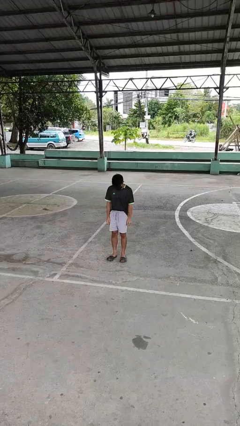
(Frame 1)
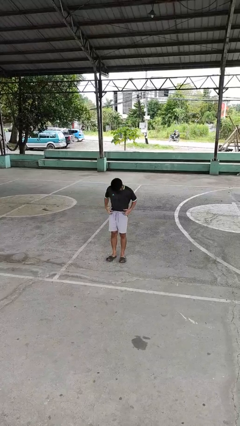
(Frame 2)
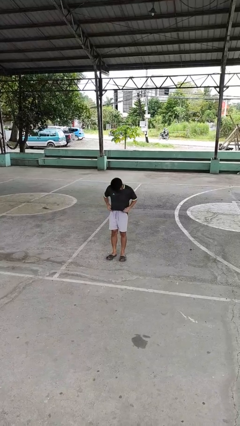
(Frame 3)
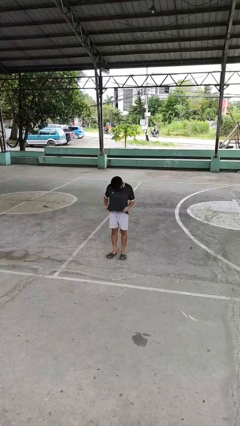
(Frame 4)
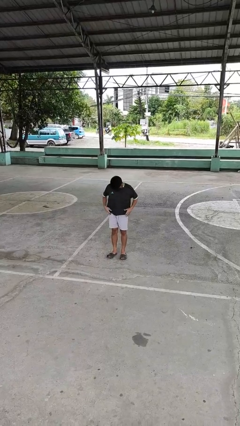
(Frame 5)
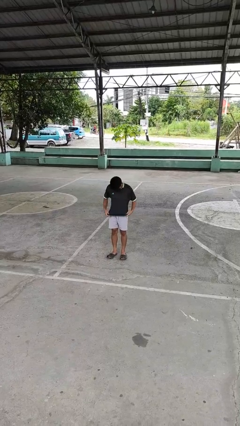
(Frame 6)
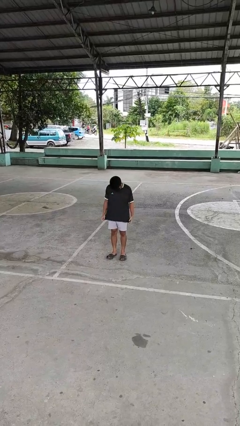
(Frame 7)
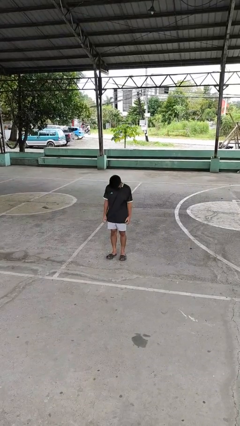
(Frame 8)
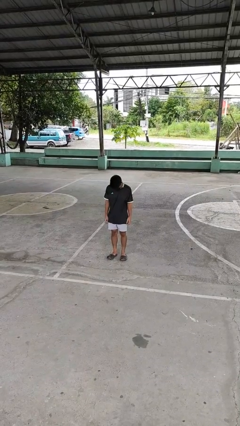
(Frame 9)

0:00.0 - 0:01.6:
person untucks shirt

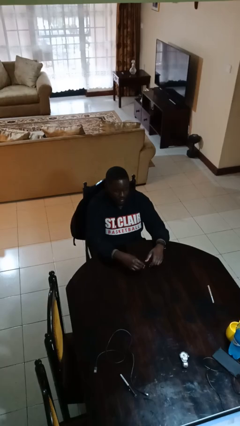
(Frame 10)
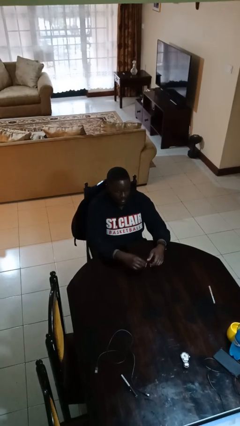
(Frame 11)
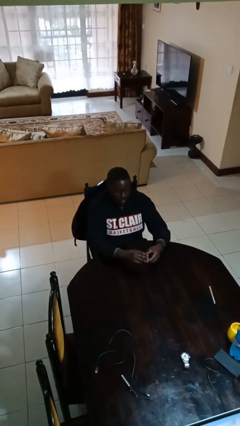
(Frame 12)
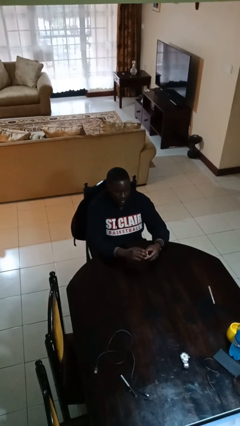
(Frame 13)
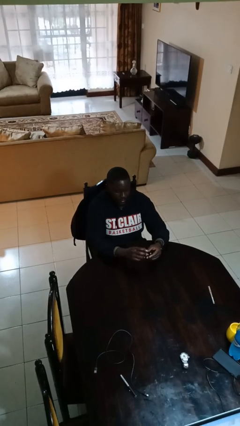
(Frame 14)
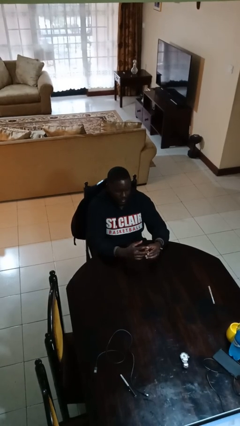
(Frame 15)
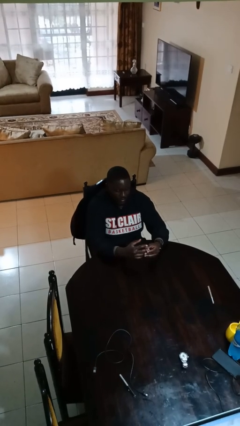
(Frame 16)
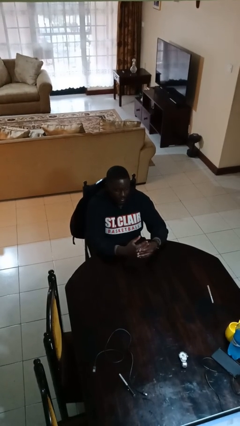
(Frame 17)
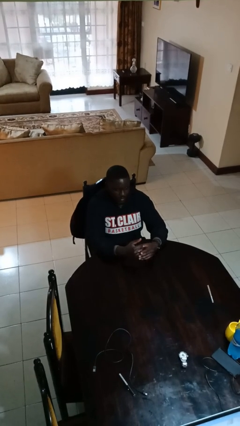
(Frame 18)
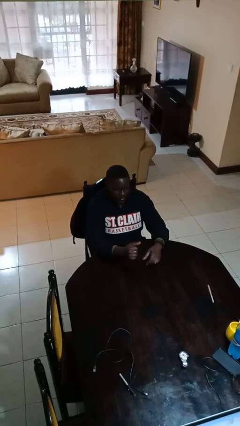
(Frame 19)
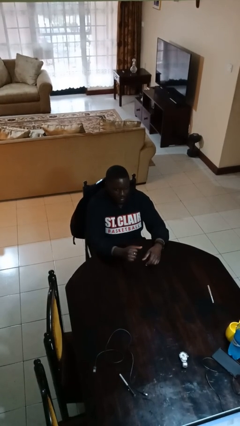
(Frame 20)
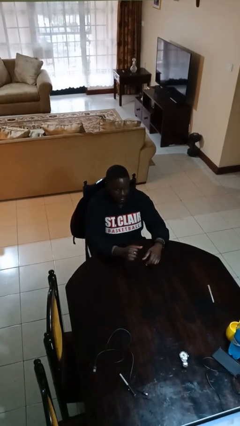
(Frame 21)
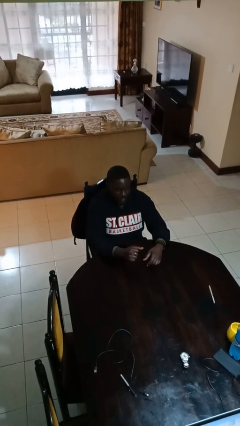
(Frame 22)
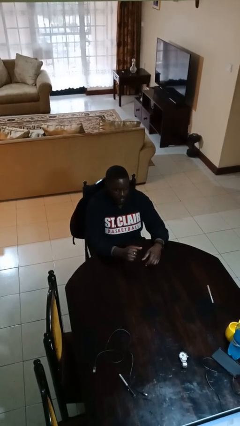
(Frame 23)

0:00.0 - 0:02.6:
person puts on ring

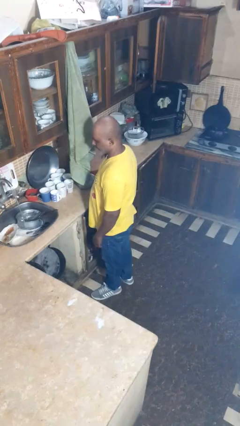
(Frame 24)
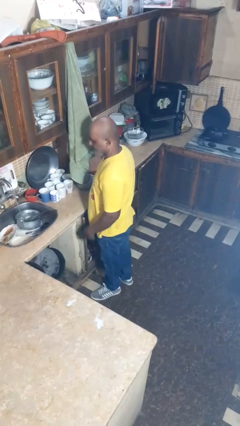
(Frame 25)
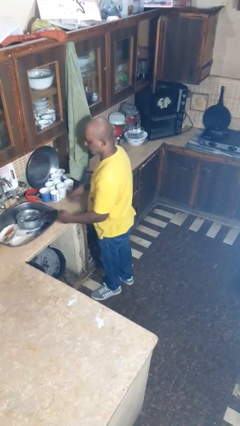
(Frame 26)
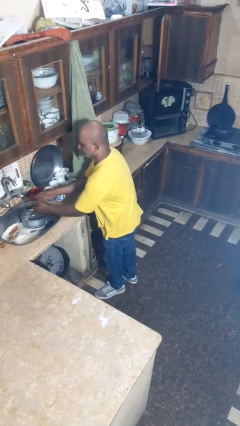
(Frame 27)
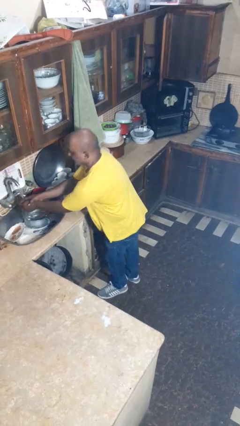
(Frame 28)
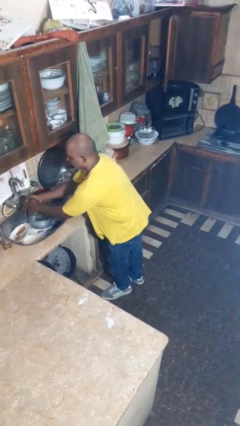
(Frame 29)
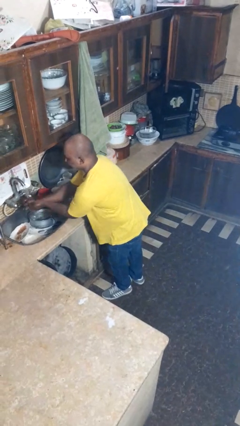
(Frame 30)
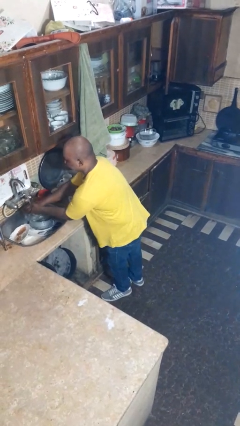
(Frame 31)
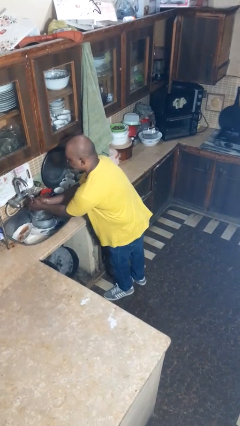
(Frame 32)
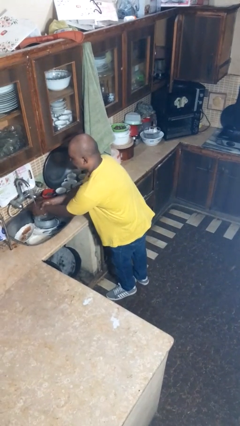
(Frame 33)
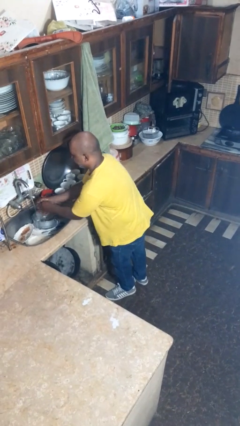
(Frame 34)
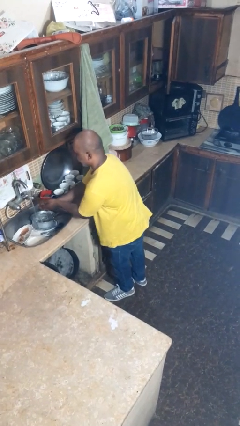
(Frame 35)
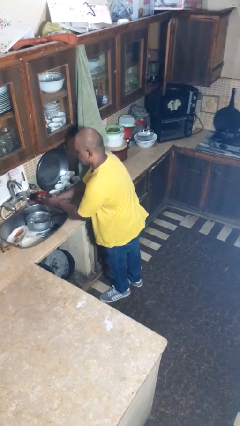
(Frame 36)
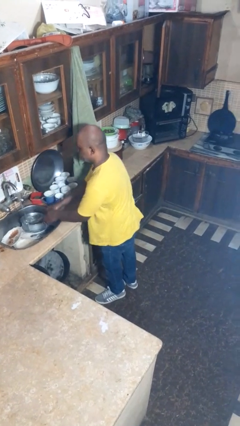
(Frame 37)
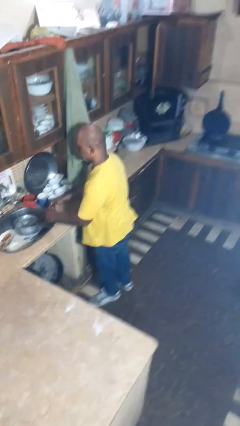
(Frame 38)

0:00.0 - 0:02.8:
person washes hands

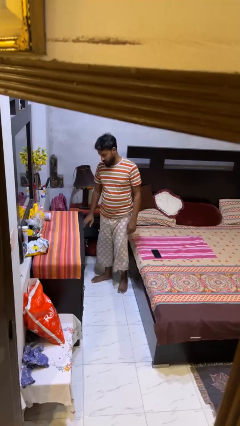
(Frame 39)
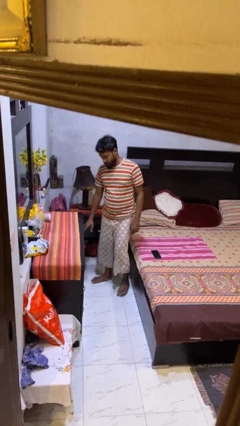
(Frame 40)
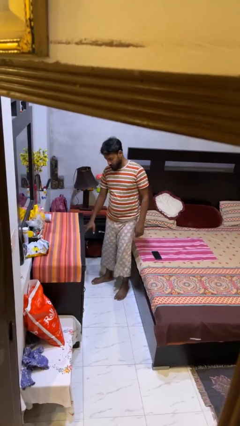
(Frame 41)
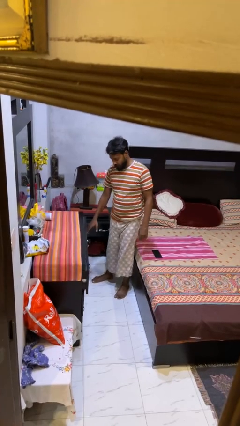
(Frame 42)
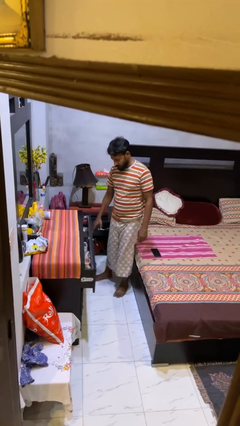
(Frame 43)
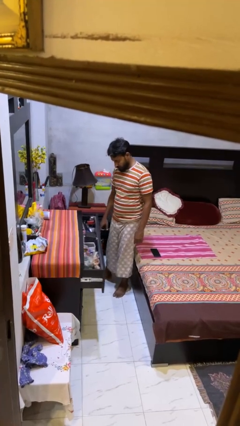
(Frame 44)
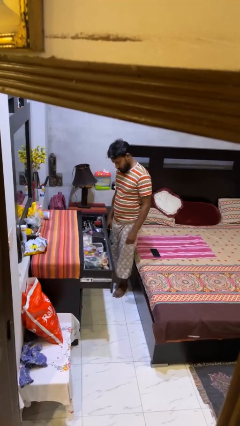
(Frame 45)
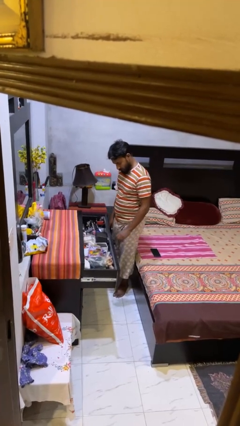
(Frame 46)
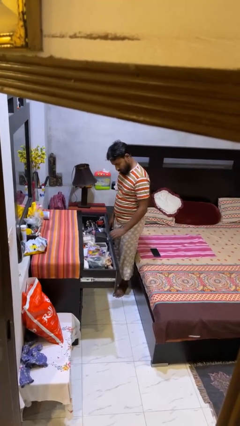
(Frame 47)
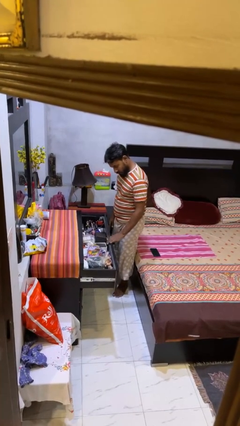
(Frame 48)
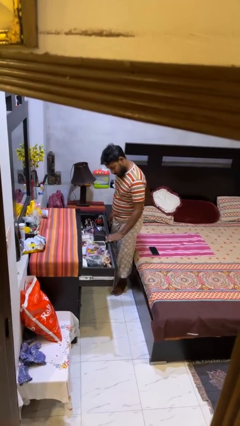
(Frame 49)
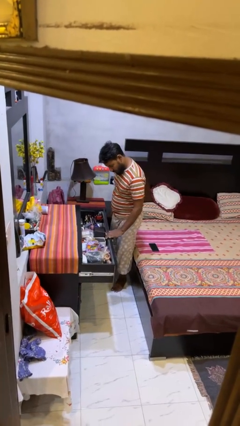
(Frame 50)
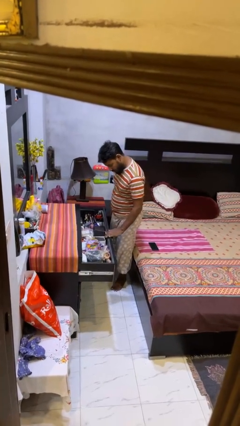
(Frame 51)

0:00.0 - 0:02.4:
person opens dresser drawer

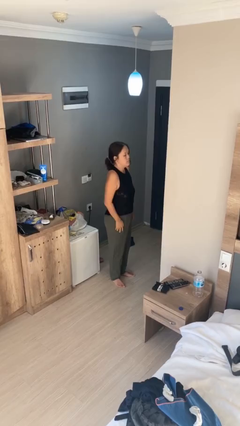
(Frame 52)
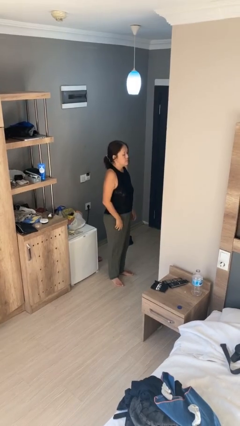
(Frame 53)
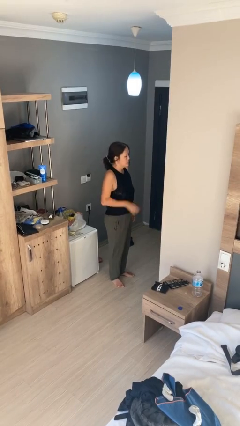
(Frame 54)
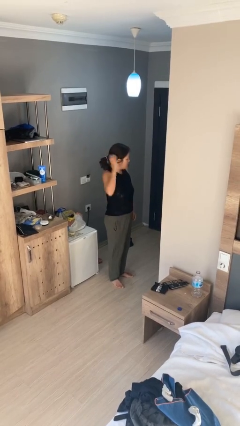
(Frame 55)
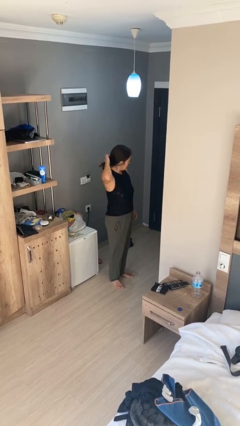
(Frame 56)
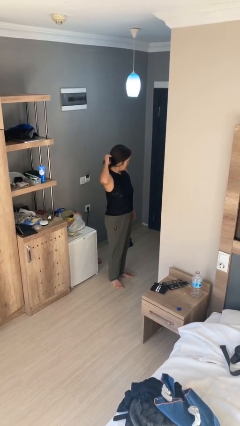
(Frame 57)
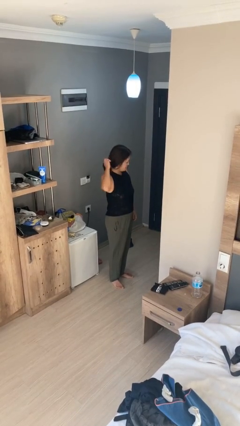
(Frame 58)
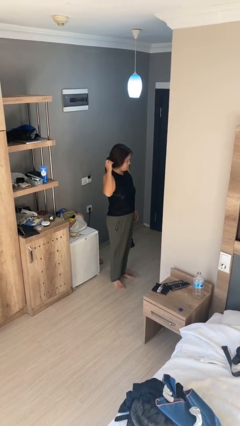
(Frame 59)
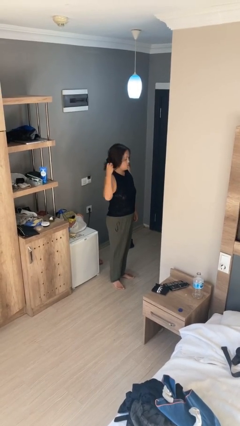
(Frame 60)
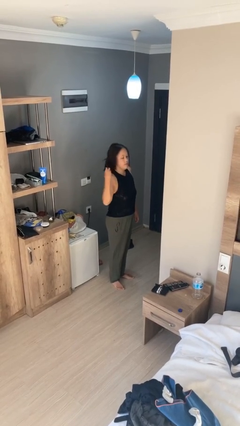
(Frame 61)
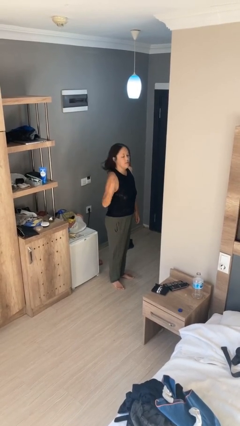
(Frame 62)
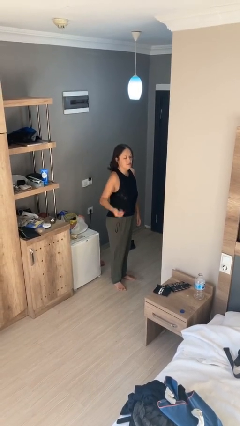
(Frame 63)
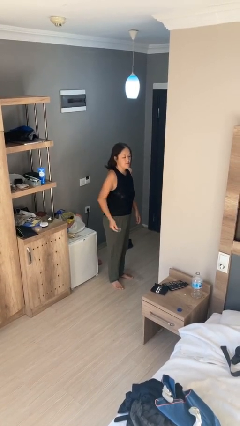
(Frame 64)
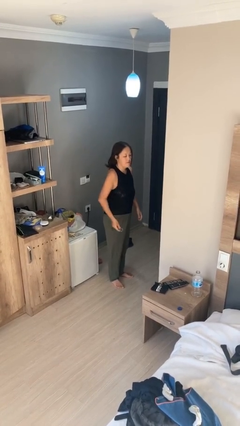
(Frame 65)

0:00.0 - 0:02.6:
person takes off hairtie

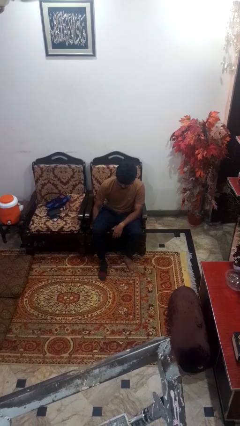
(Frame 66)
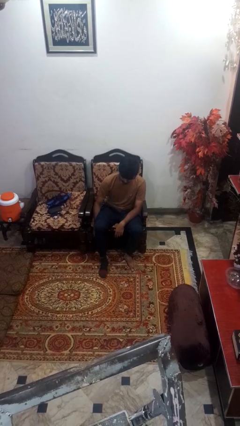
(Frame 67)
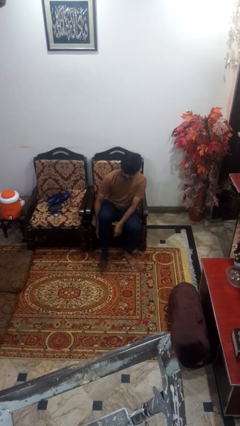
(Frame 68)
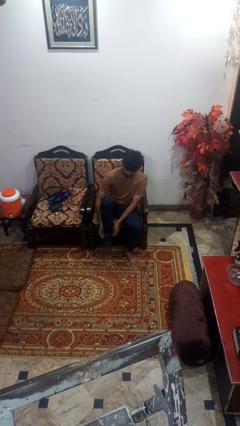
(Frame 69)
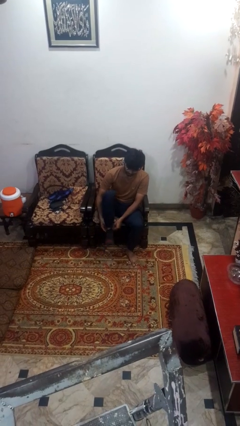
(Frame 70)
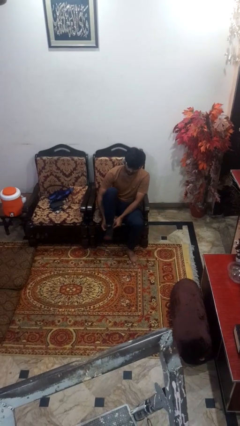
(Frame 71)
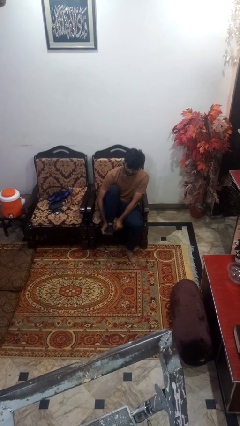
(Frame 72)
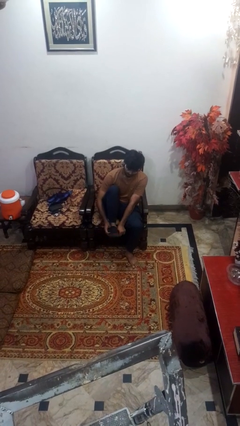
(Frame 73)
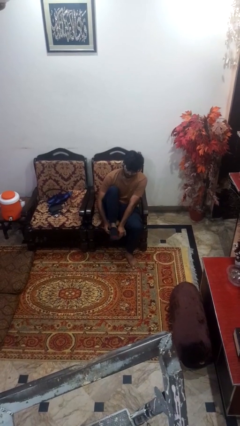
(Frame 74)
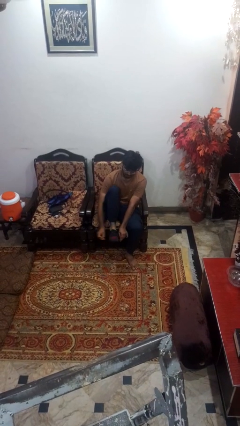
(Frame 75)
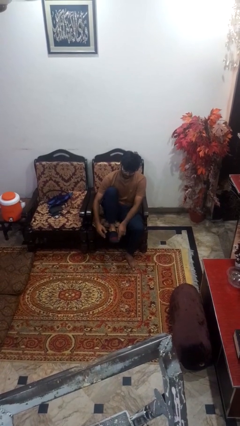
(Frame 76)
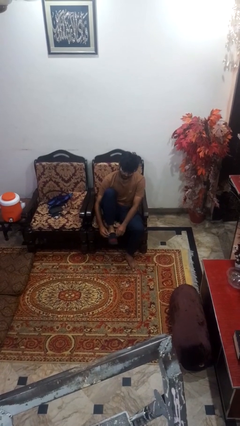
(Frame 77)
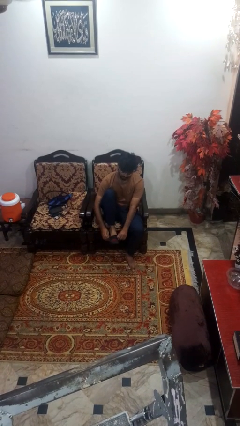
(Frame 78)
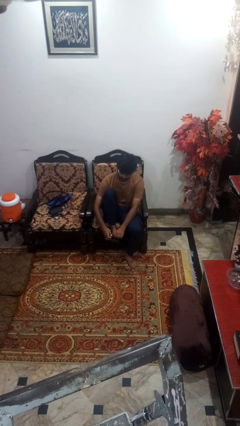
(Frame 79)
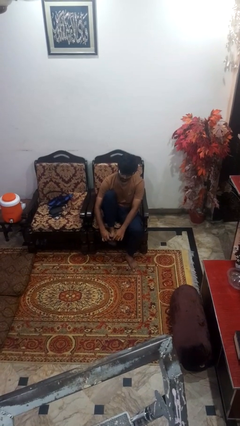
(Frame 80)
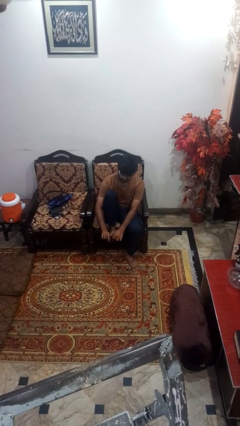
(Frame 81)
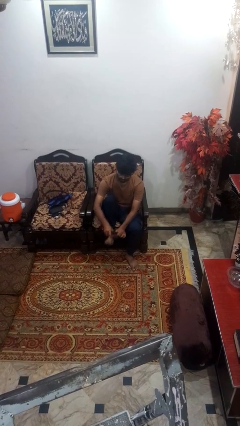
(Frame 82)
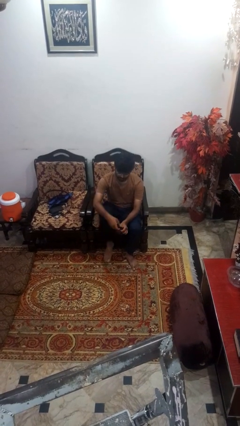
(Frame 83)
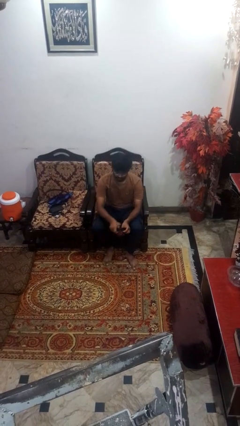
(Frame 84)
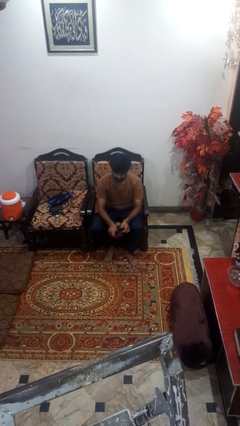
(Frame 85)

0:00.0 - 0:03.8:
person takes off socks

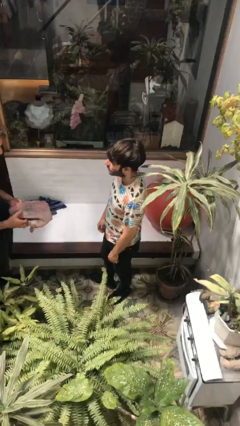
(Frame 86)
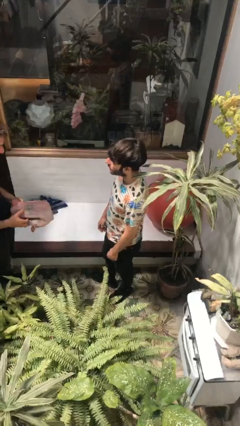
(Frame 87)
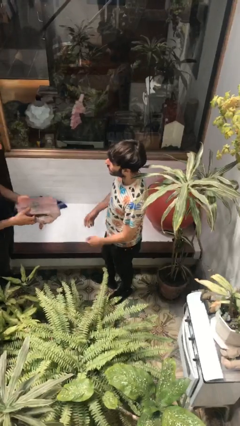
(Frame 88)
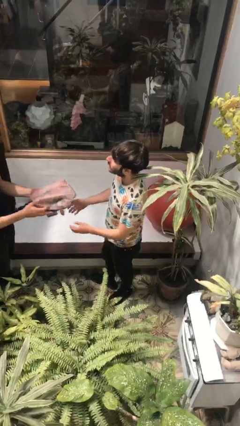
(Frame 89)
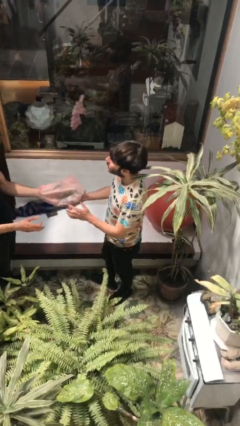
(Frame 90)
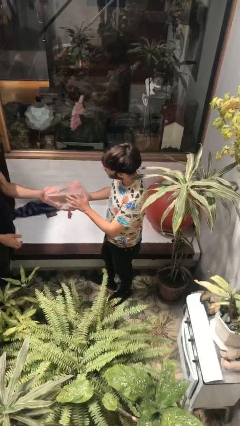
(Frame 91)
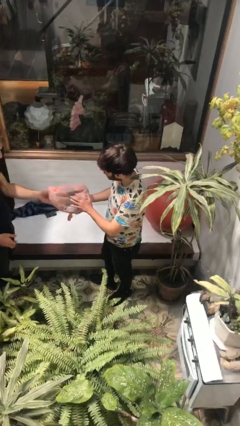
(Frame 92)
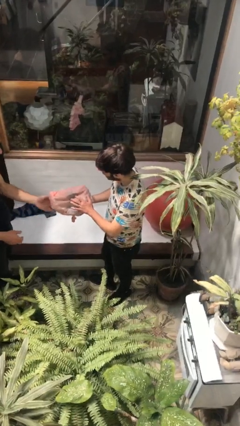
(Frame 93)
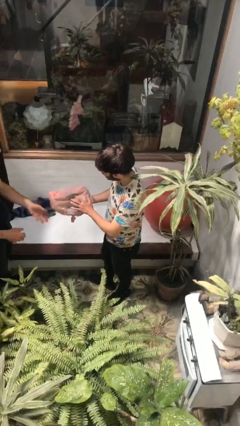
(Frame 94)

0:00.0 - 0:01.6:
person transfers object to person
